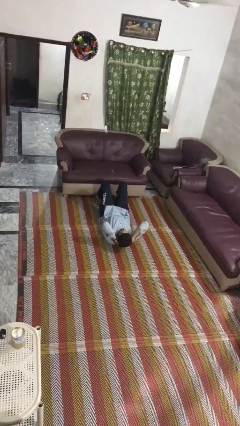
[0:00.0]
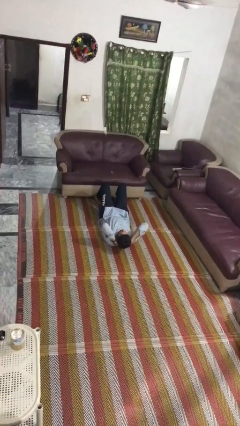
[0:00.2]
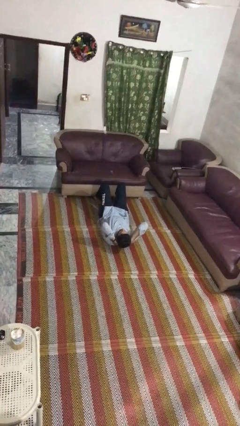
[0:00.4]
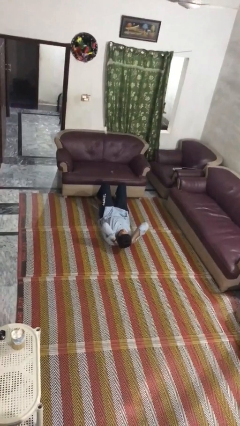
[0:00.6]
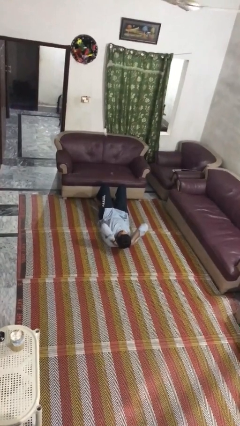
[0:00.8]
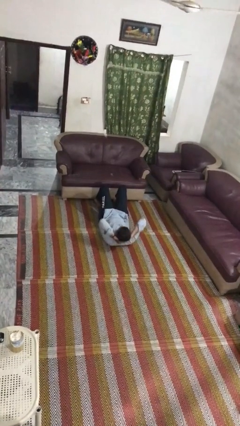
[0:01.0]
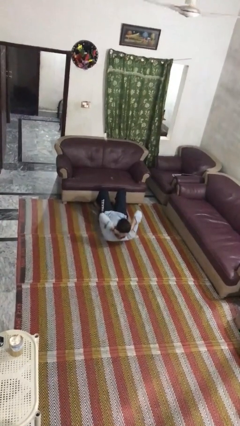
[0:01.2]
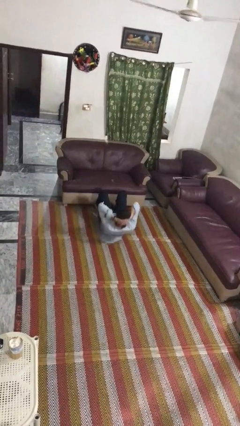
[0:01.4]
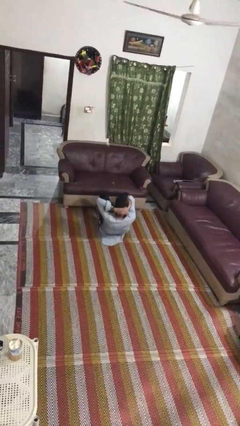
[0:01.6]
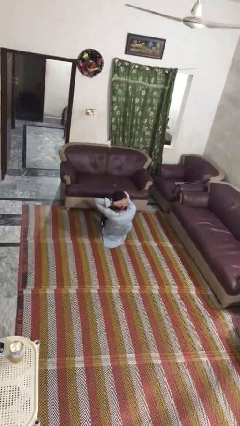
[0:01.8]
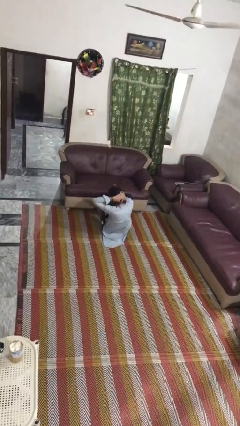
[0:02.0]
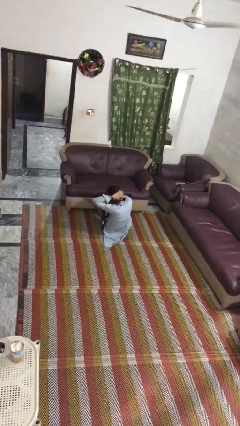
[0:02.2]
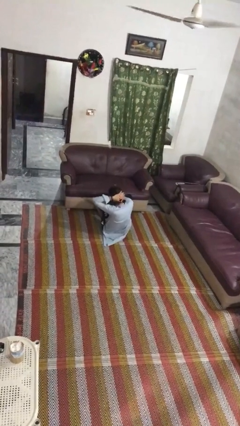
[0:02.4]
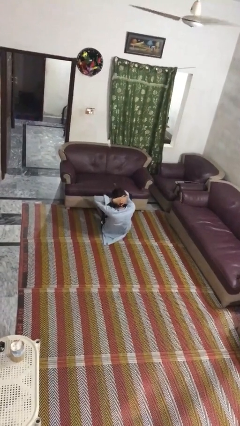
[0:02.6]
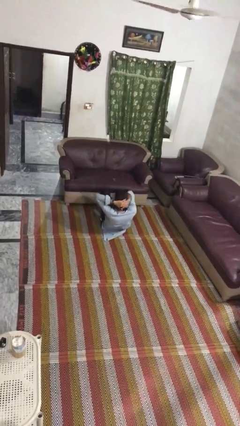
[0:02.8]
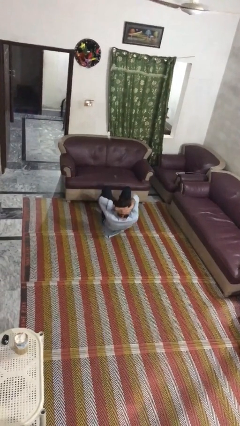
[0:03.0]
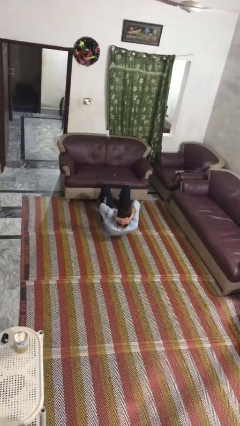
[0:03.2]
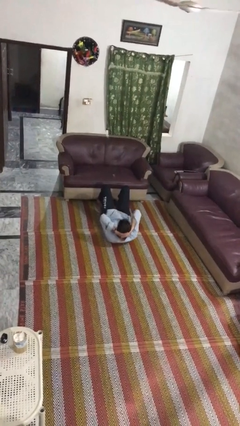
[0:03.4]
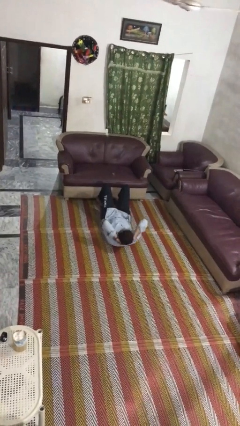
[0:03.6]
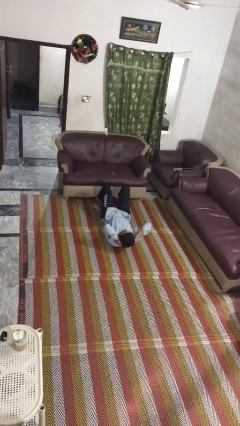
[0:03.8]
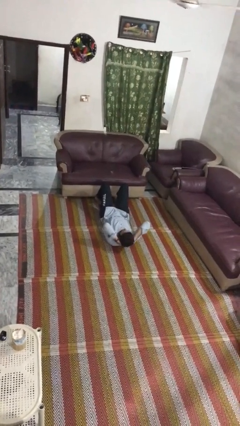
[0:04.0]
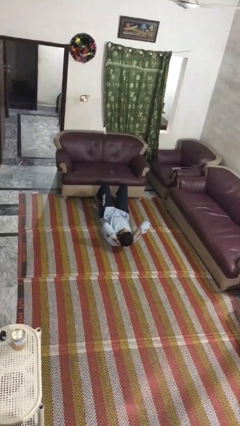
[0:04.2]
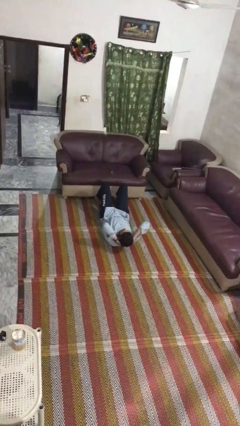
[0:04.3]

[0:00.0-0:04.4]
person exercises with situp

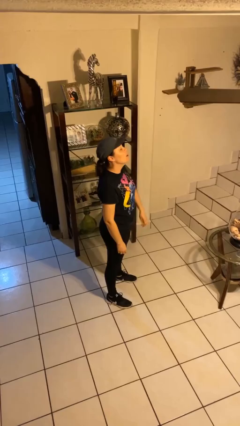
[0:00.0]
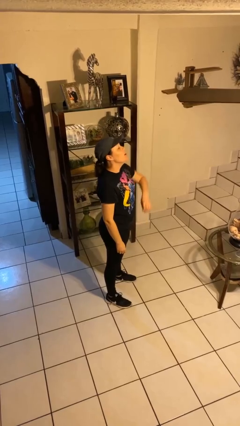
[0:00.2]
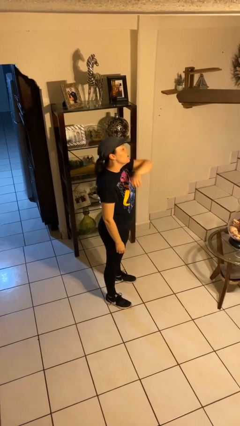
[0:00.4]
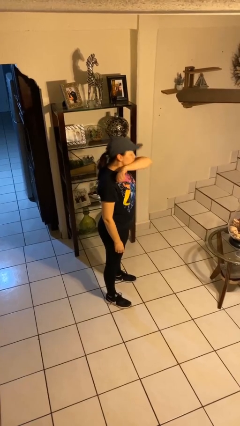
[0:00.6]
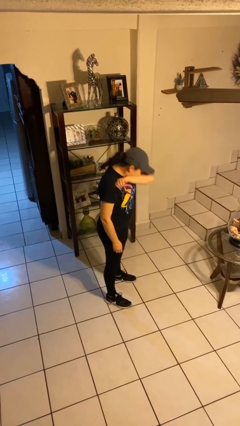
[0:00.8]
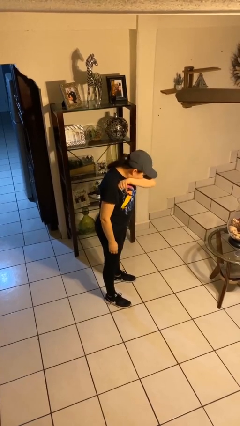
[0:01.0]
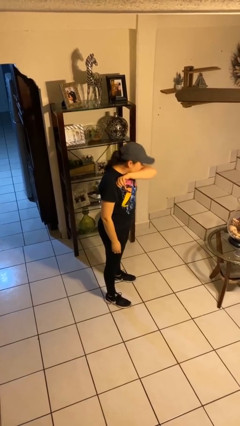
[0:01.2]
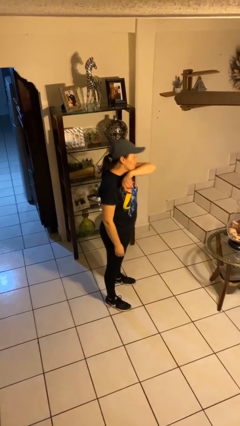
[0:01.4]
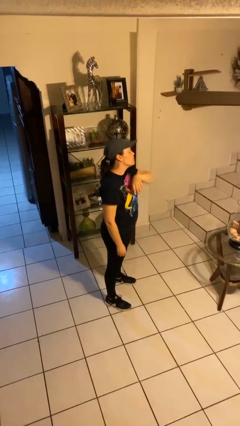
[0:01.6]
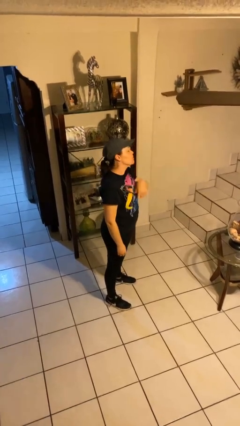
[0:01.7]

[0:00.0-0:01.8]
person sneezes into arm

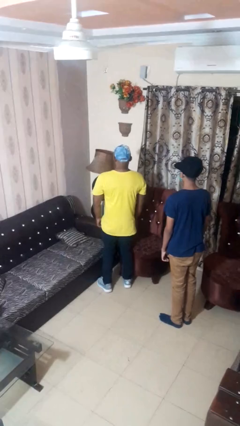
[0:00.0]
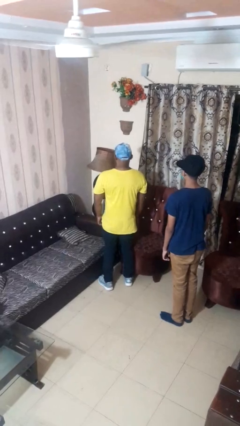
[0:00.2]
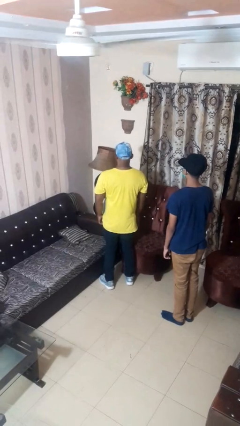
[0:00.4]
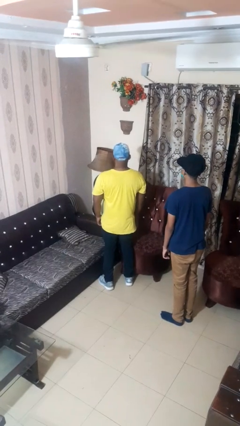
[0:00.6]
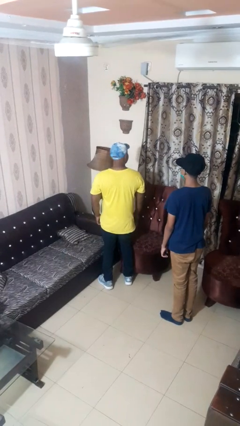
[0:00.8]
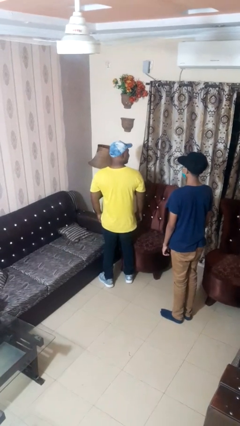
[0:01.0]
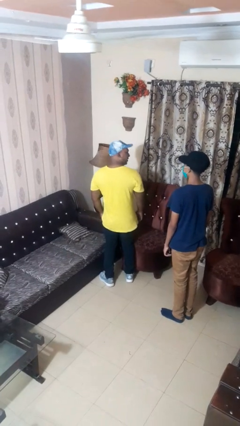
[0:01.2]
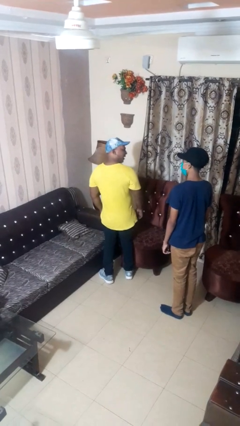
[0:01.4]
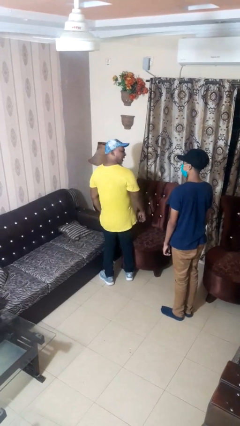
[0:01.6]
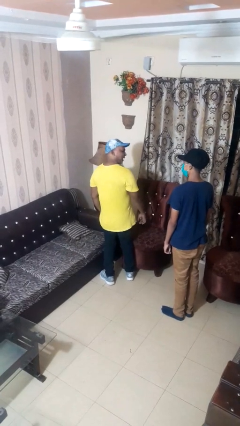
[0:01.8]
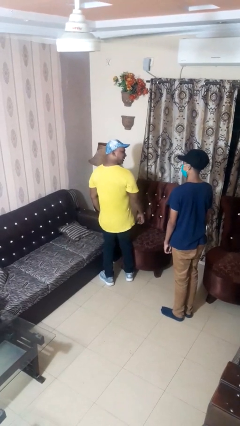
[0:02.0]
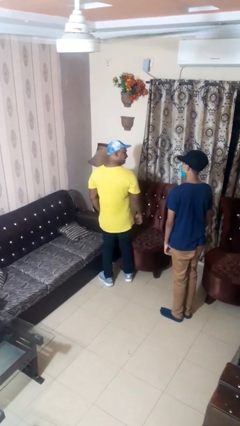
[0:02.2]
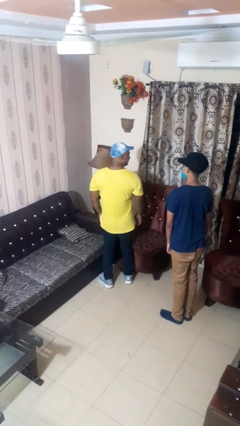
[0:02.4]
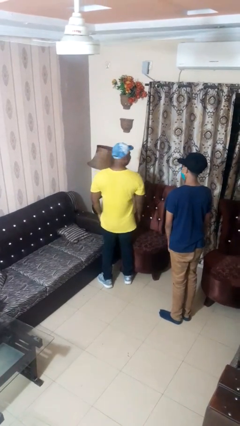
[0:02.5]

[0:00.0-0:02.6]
person looks over shoulder

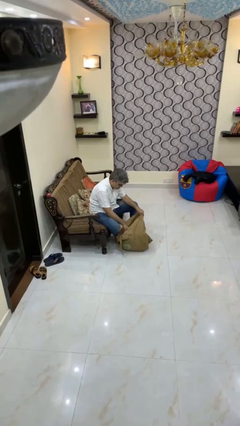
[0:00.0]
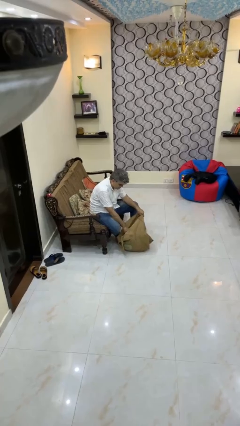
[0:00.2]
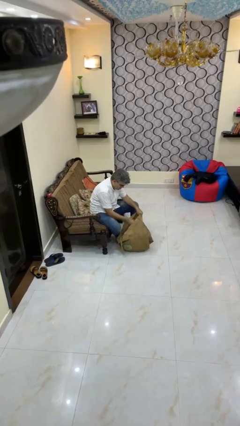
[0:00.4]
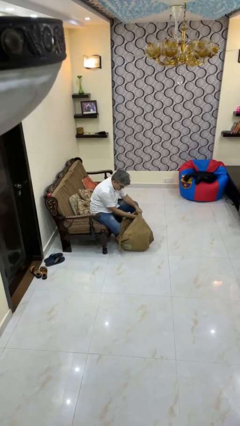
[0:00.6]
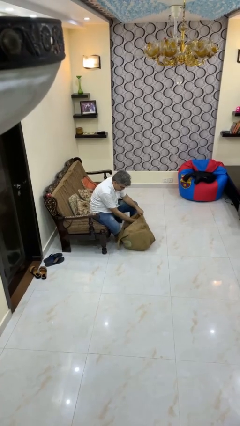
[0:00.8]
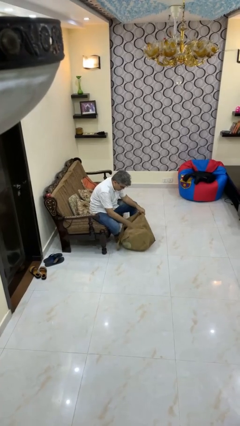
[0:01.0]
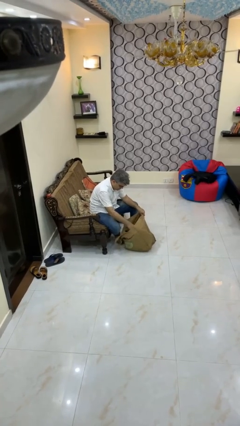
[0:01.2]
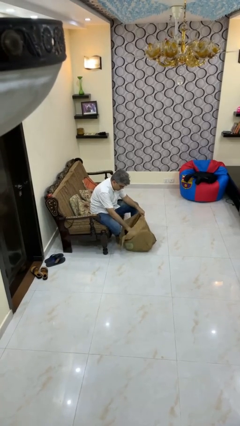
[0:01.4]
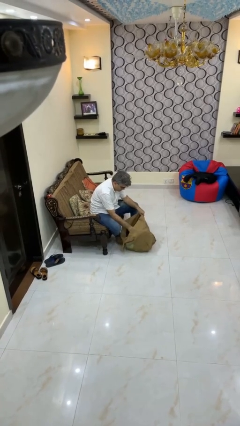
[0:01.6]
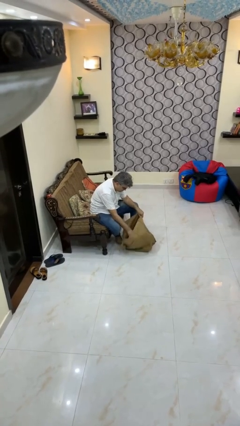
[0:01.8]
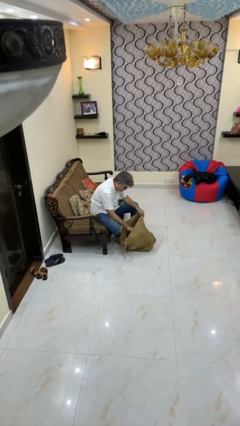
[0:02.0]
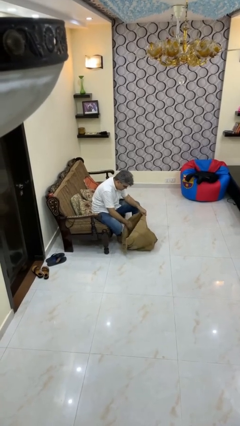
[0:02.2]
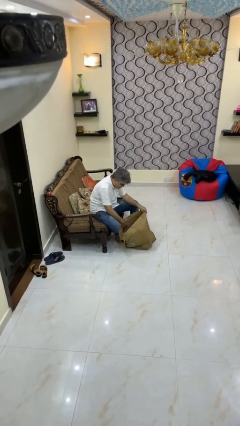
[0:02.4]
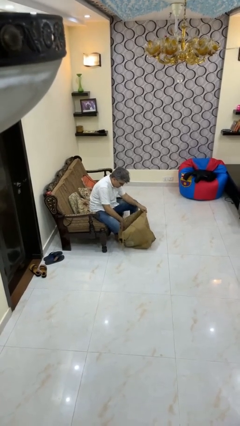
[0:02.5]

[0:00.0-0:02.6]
person searches in bag

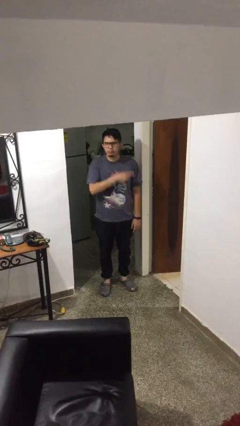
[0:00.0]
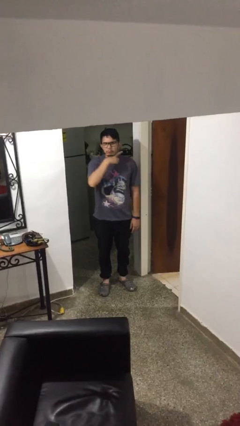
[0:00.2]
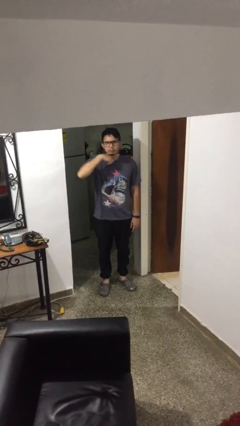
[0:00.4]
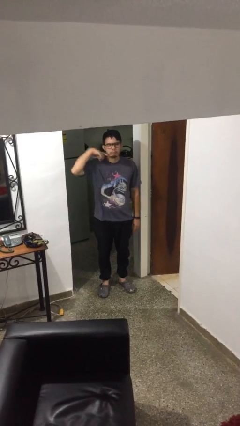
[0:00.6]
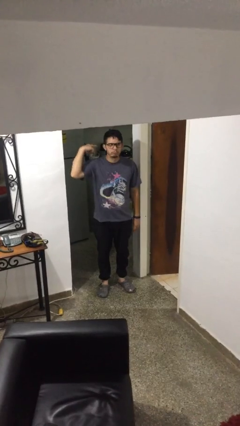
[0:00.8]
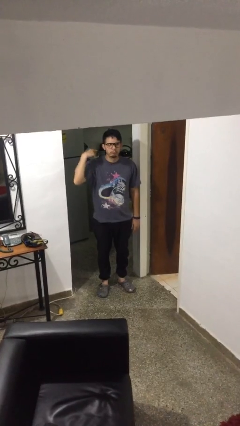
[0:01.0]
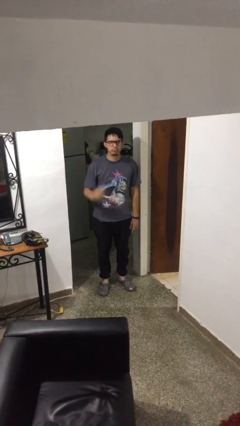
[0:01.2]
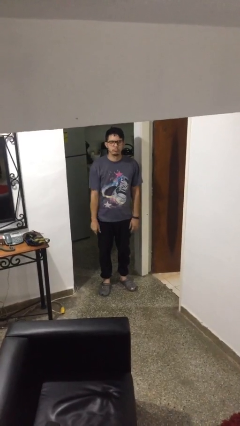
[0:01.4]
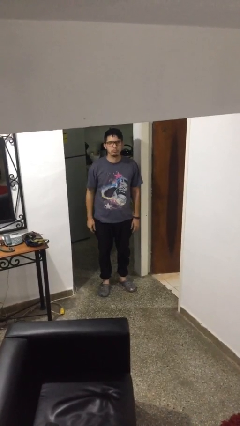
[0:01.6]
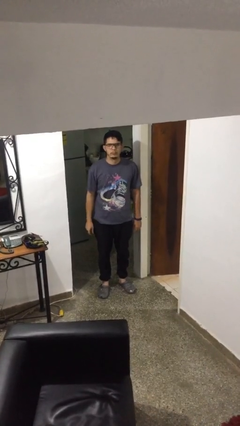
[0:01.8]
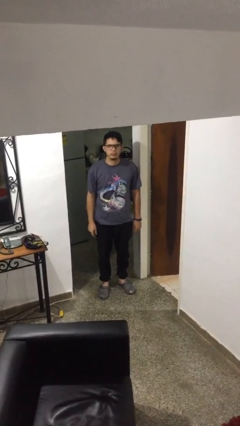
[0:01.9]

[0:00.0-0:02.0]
person gestures cut

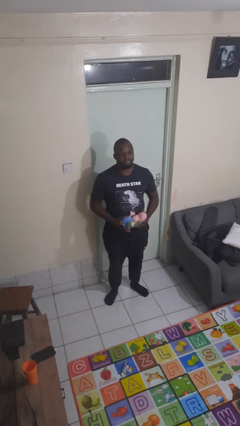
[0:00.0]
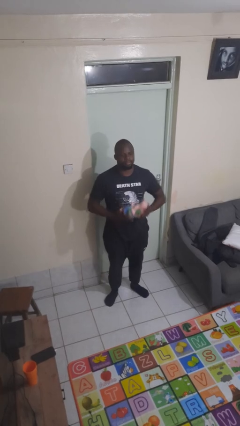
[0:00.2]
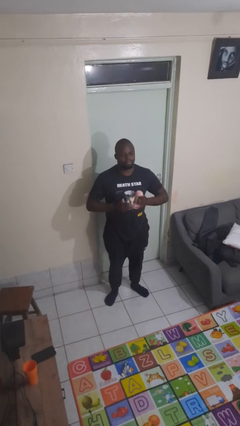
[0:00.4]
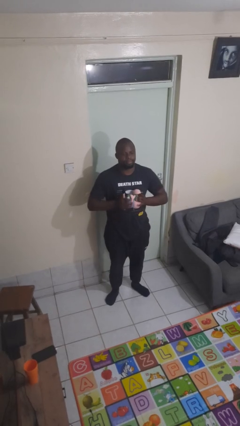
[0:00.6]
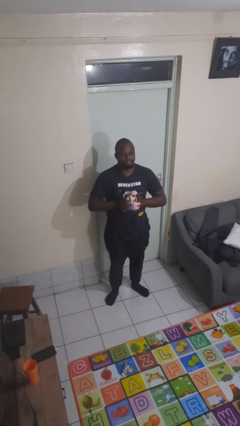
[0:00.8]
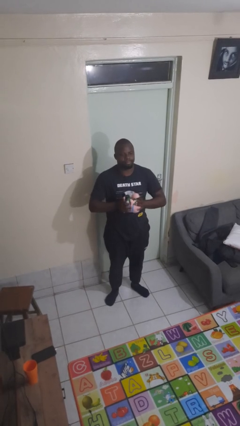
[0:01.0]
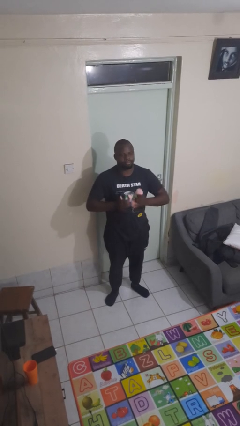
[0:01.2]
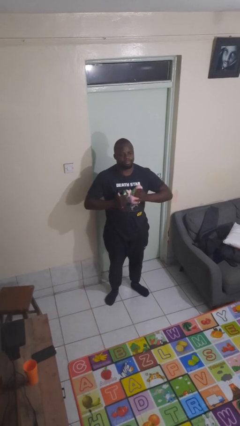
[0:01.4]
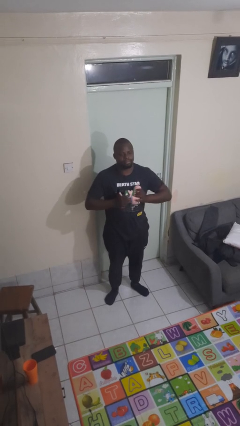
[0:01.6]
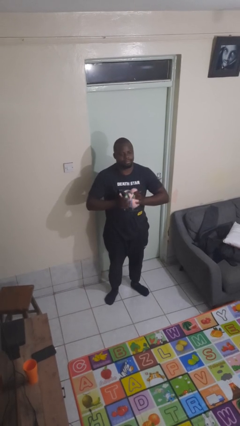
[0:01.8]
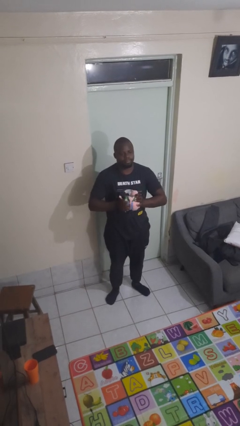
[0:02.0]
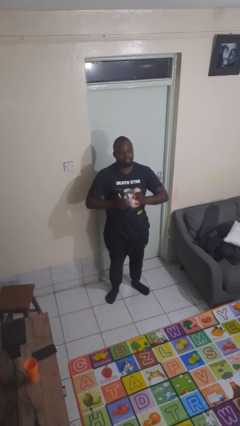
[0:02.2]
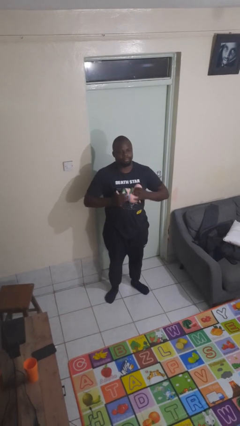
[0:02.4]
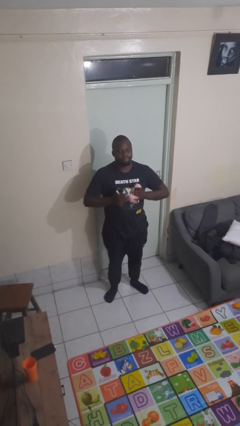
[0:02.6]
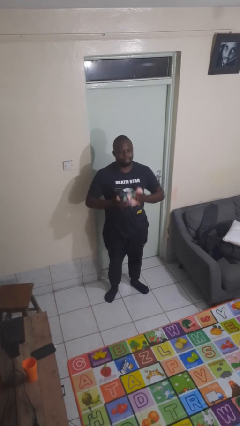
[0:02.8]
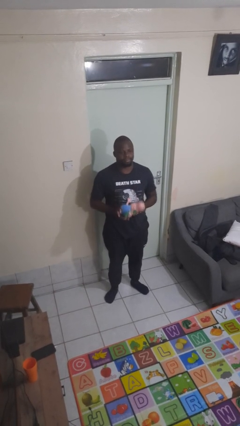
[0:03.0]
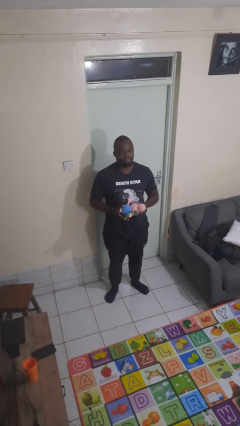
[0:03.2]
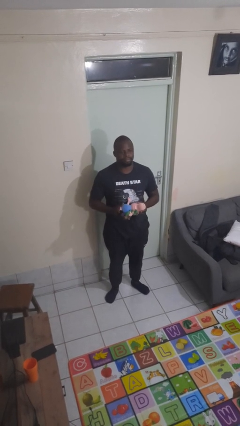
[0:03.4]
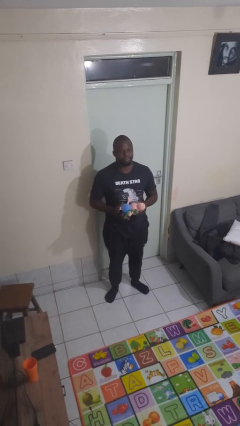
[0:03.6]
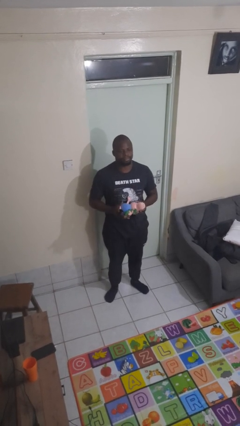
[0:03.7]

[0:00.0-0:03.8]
person squeezes object

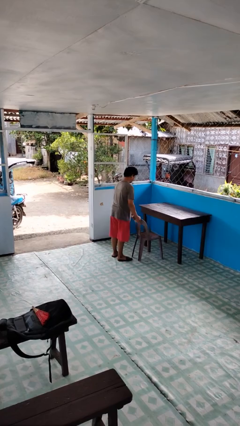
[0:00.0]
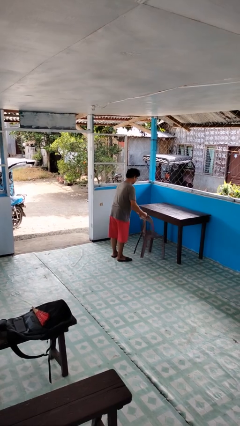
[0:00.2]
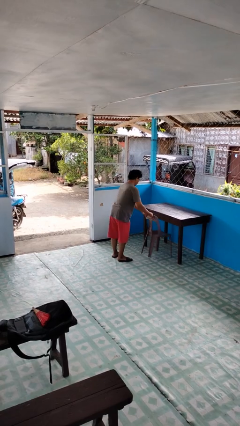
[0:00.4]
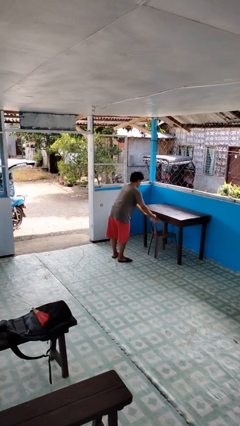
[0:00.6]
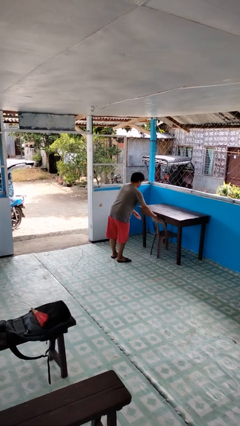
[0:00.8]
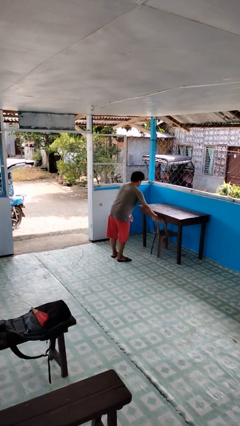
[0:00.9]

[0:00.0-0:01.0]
person pushes in chair
